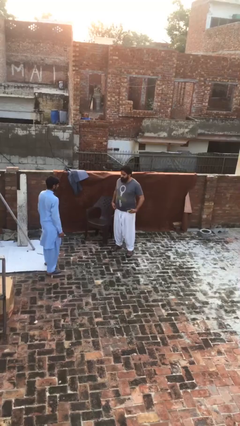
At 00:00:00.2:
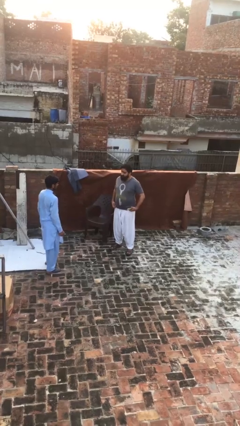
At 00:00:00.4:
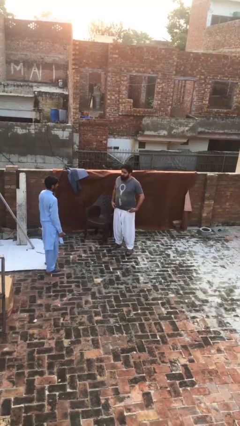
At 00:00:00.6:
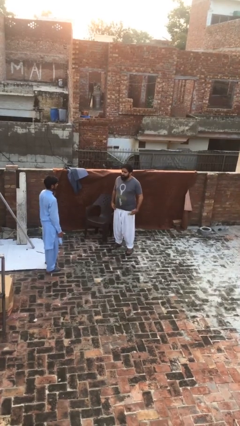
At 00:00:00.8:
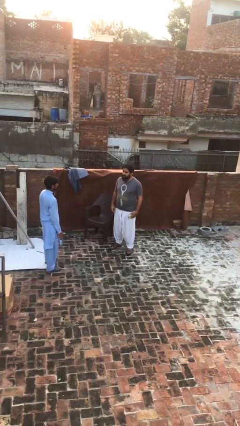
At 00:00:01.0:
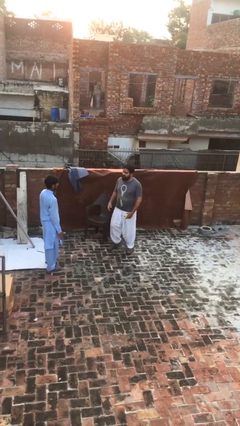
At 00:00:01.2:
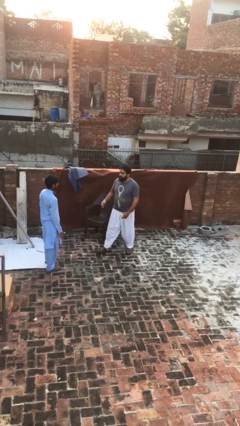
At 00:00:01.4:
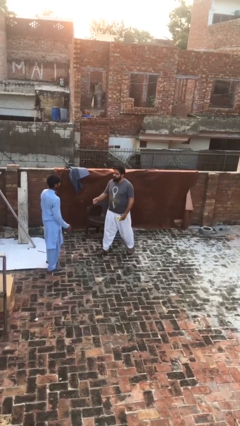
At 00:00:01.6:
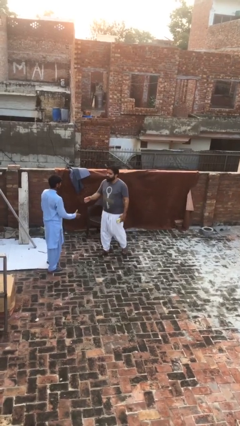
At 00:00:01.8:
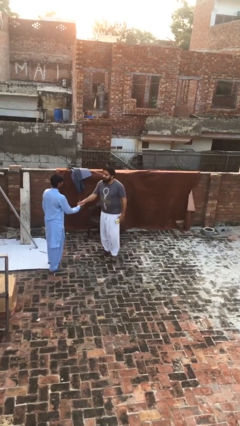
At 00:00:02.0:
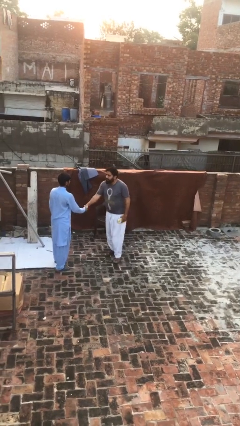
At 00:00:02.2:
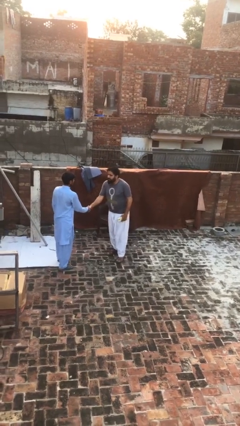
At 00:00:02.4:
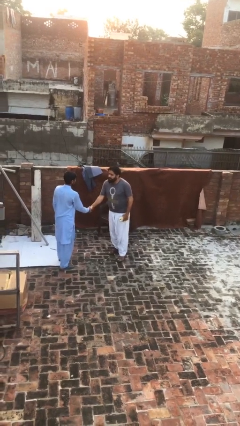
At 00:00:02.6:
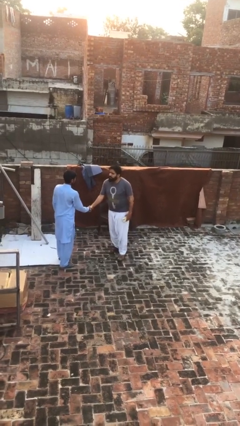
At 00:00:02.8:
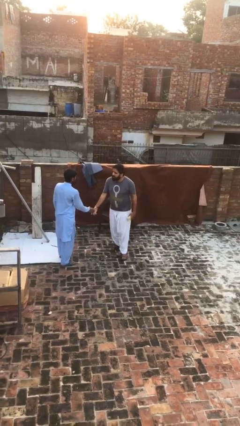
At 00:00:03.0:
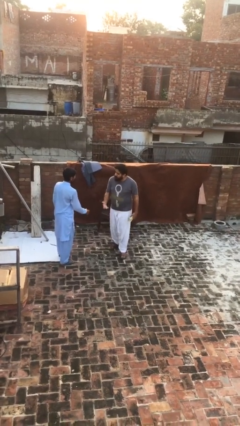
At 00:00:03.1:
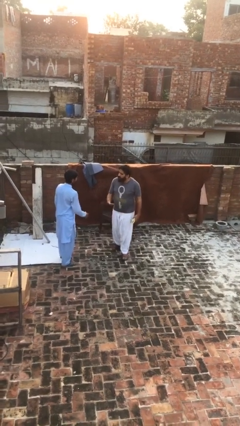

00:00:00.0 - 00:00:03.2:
person shakes hand

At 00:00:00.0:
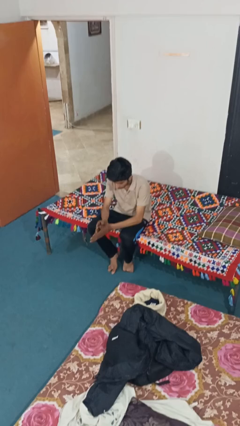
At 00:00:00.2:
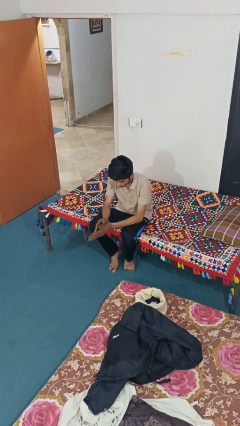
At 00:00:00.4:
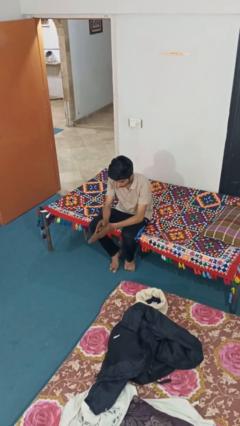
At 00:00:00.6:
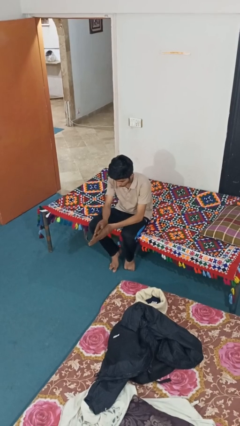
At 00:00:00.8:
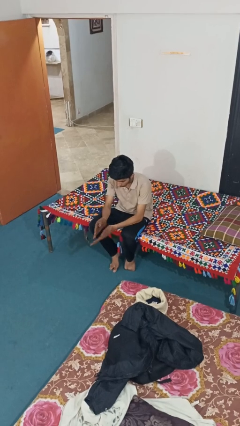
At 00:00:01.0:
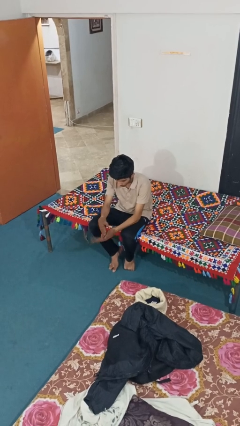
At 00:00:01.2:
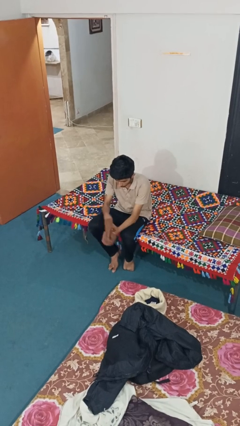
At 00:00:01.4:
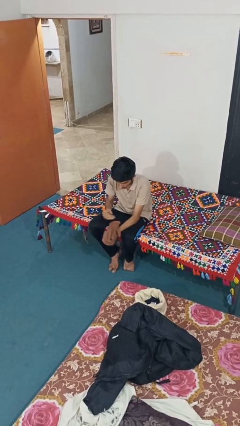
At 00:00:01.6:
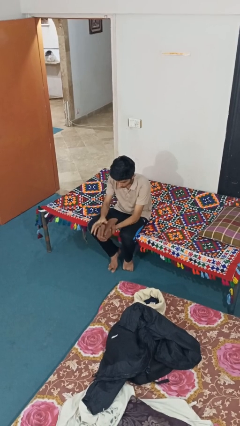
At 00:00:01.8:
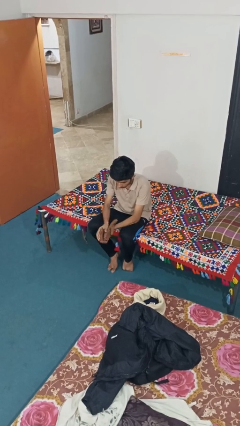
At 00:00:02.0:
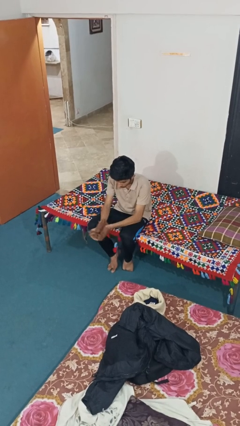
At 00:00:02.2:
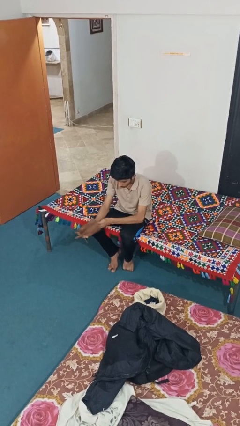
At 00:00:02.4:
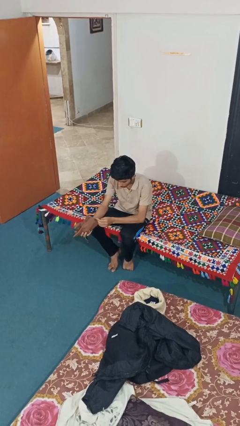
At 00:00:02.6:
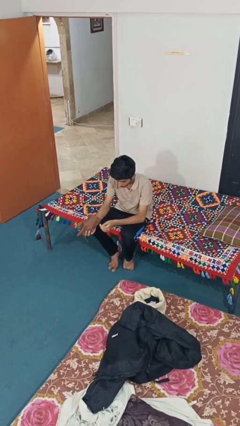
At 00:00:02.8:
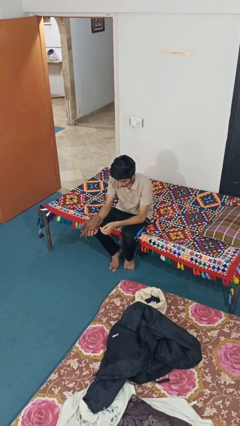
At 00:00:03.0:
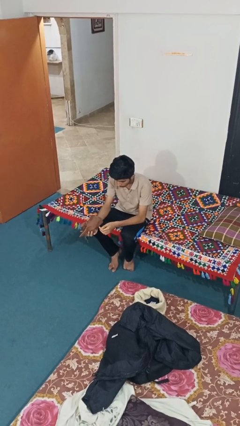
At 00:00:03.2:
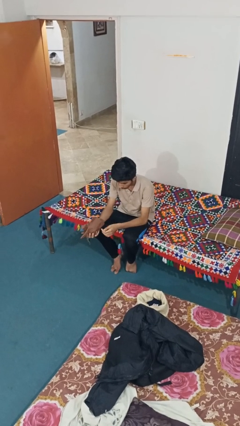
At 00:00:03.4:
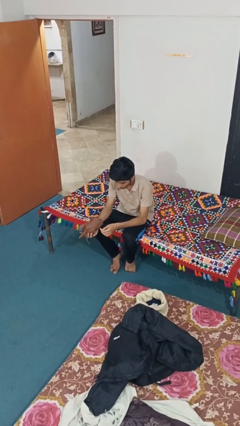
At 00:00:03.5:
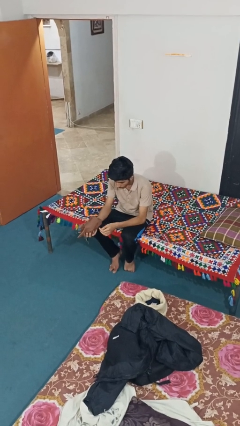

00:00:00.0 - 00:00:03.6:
person takes off gloves

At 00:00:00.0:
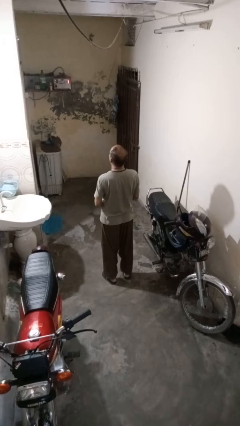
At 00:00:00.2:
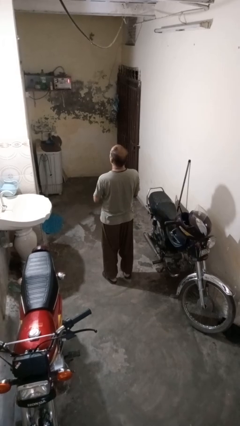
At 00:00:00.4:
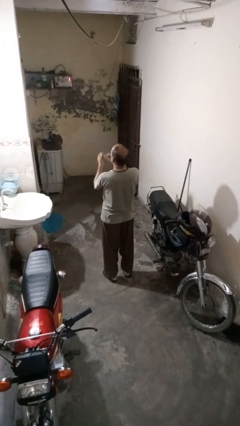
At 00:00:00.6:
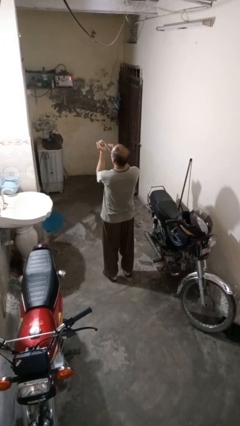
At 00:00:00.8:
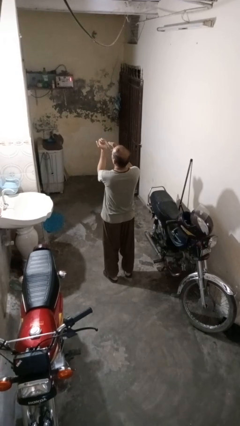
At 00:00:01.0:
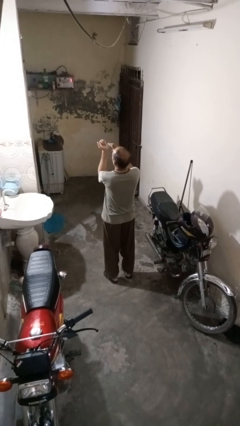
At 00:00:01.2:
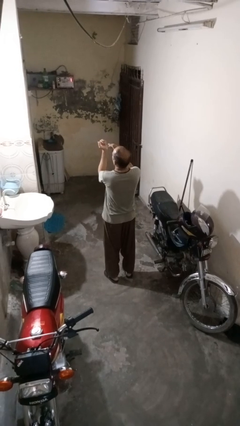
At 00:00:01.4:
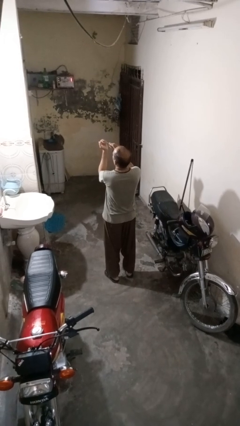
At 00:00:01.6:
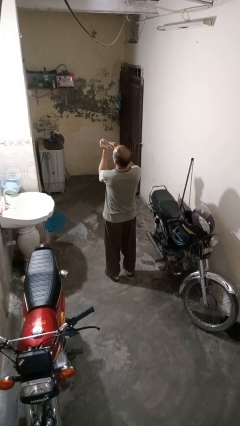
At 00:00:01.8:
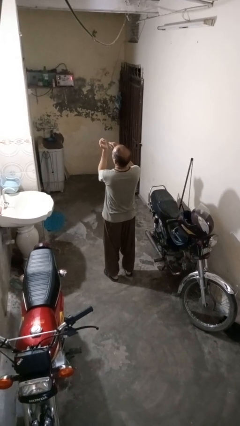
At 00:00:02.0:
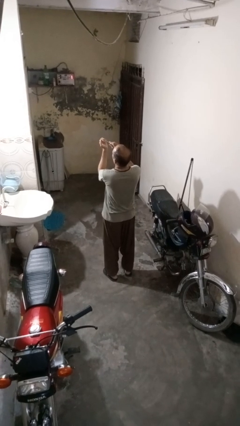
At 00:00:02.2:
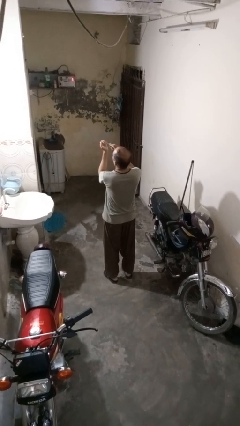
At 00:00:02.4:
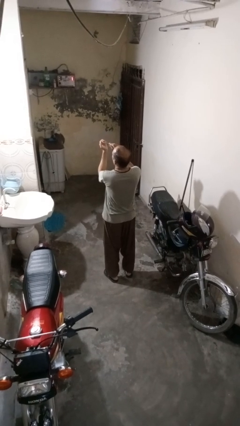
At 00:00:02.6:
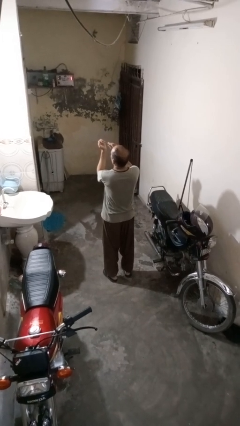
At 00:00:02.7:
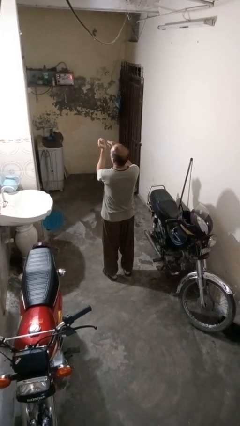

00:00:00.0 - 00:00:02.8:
person clips fingernails

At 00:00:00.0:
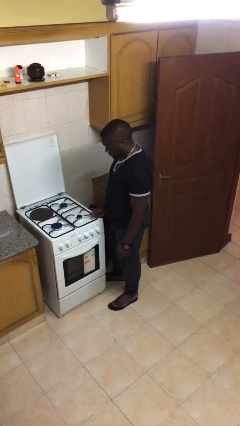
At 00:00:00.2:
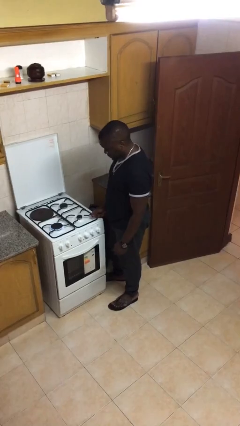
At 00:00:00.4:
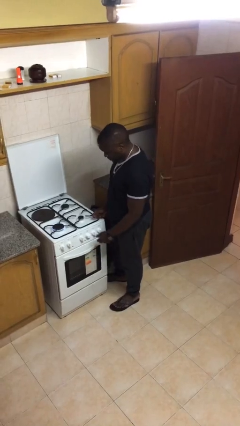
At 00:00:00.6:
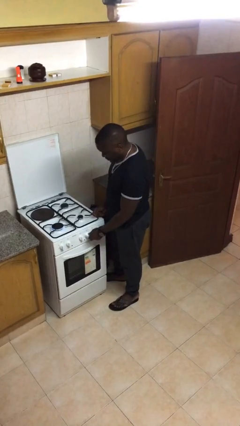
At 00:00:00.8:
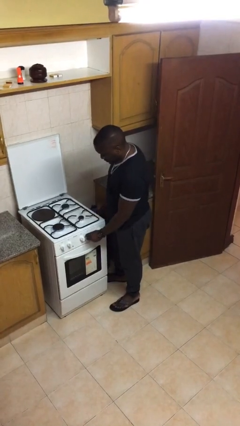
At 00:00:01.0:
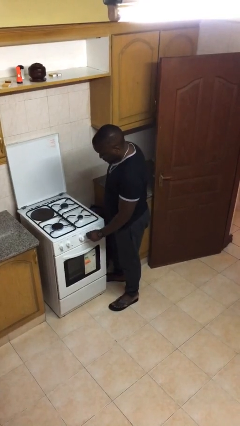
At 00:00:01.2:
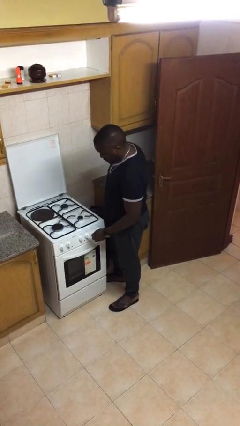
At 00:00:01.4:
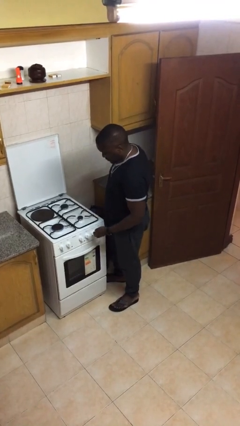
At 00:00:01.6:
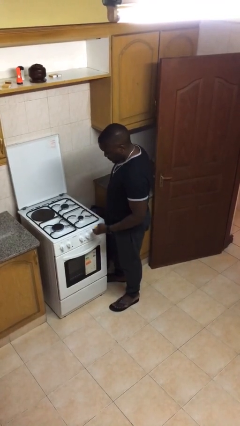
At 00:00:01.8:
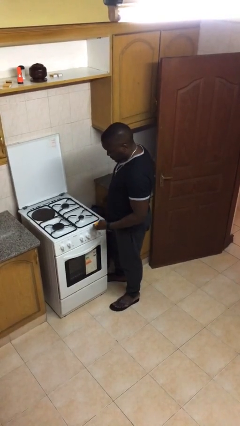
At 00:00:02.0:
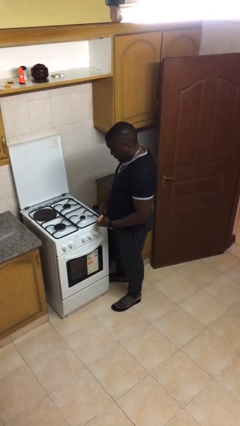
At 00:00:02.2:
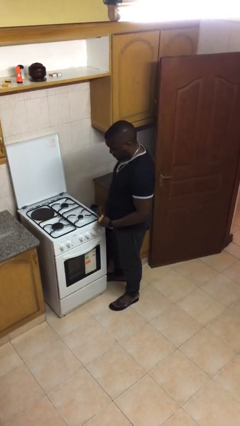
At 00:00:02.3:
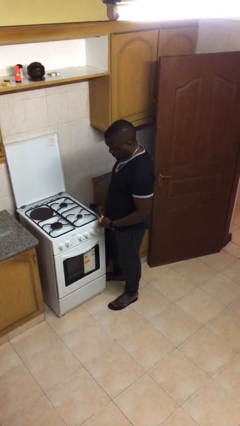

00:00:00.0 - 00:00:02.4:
person turns off stovetop

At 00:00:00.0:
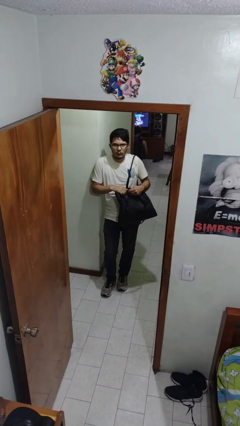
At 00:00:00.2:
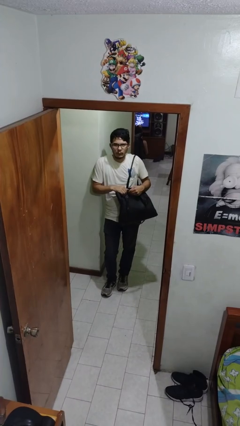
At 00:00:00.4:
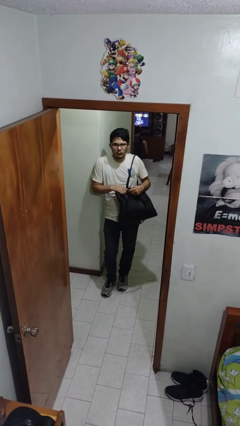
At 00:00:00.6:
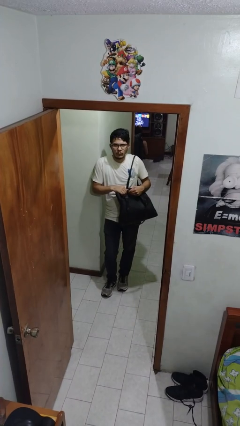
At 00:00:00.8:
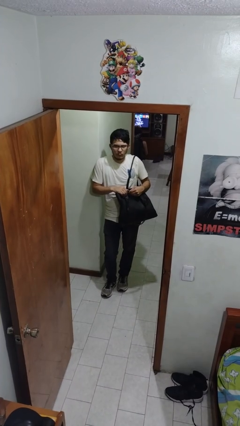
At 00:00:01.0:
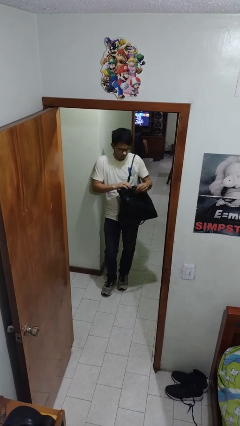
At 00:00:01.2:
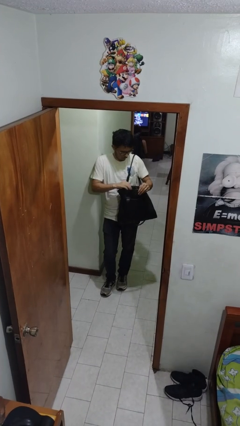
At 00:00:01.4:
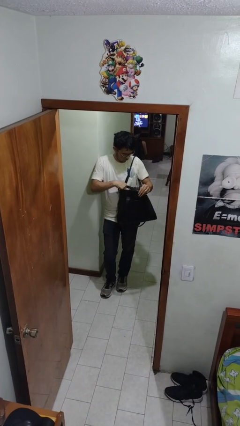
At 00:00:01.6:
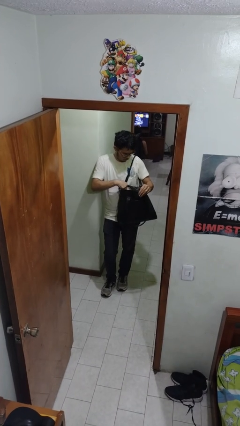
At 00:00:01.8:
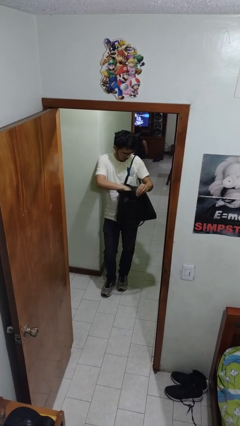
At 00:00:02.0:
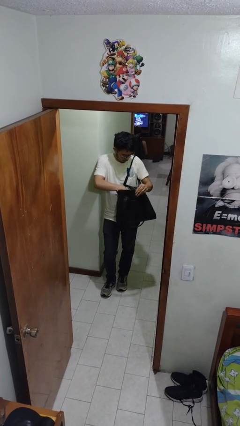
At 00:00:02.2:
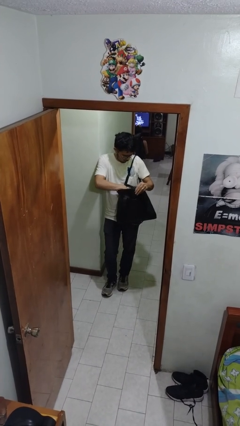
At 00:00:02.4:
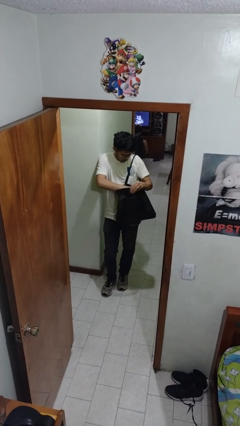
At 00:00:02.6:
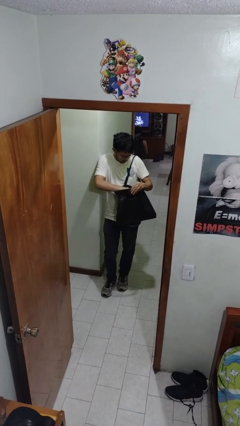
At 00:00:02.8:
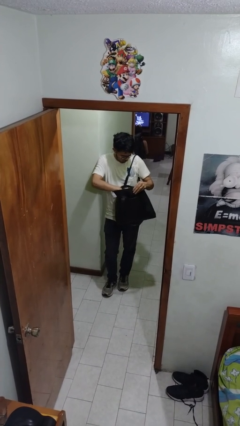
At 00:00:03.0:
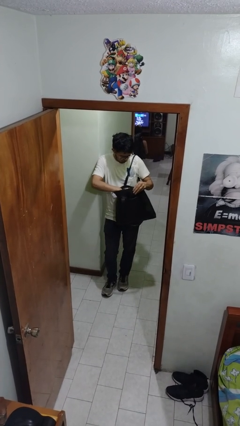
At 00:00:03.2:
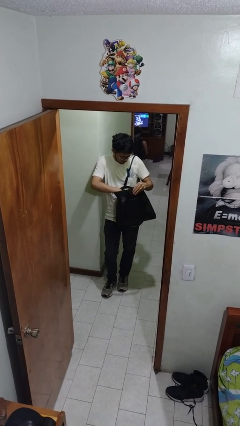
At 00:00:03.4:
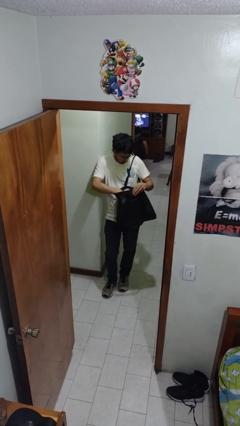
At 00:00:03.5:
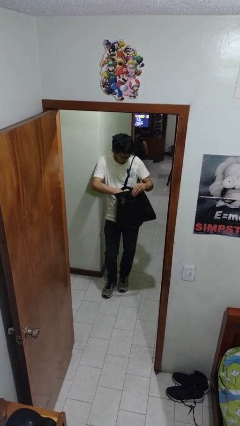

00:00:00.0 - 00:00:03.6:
person searches in purse

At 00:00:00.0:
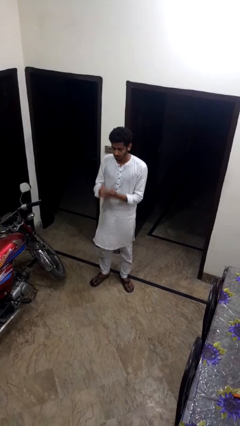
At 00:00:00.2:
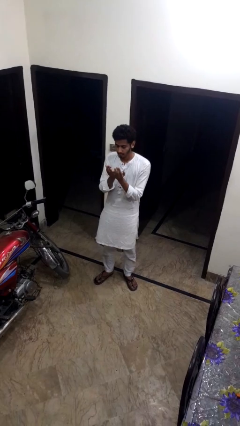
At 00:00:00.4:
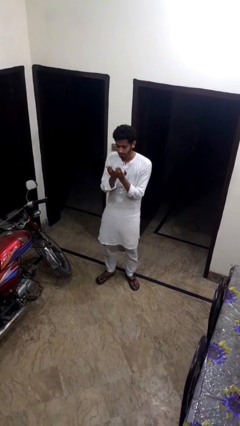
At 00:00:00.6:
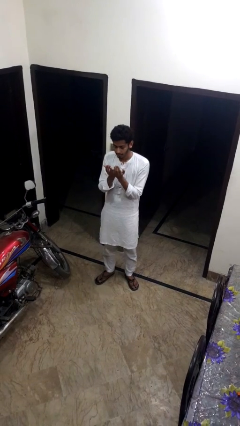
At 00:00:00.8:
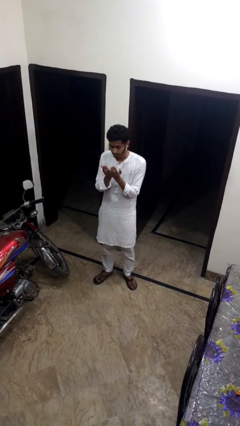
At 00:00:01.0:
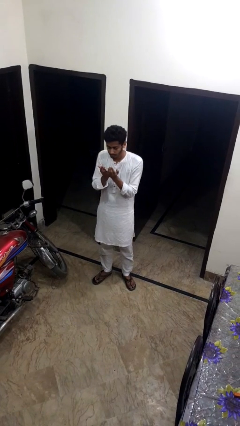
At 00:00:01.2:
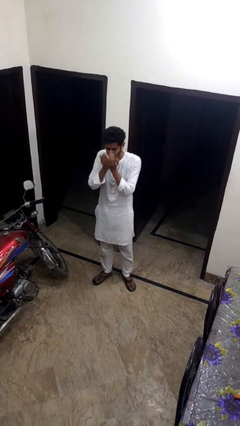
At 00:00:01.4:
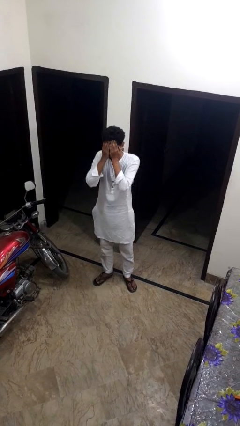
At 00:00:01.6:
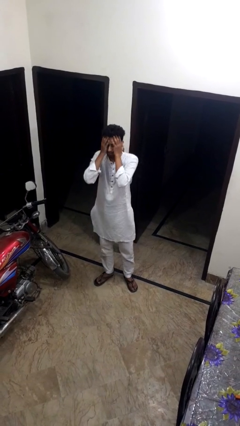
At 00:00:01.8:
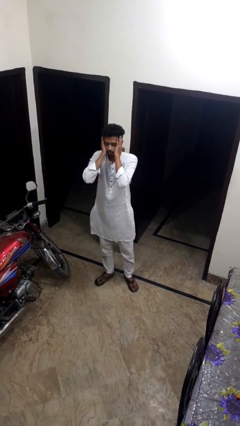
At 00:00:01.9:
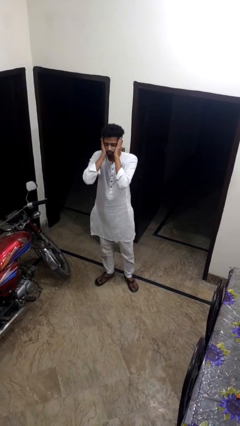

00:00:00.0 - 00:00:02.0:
person prays
